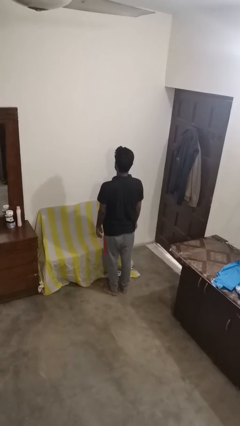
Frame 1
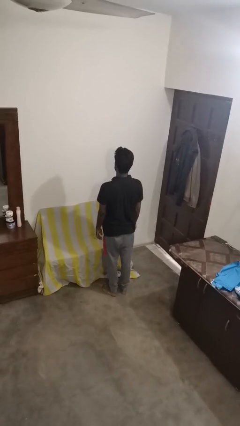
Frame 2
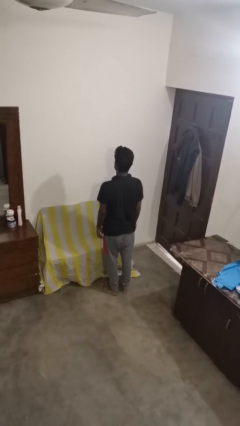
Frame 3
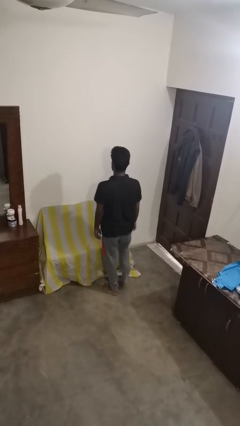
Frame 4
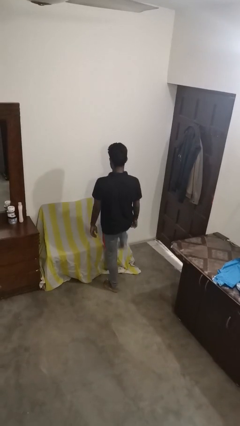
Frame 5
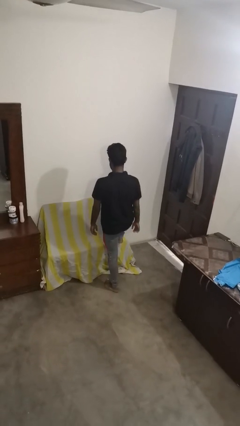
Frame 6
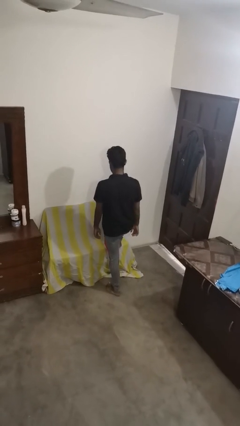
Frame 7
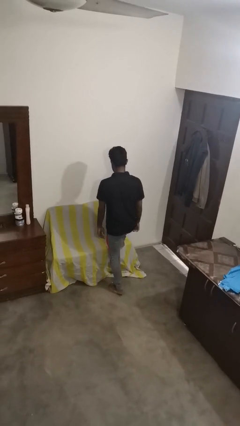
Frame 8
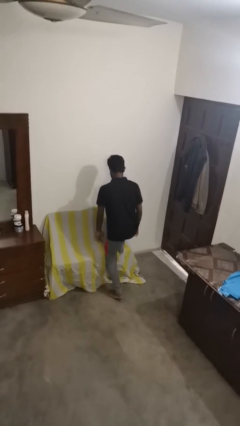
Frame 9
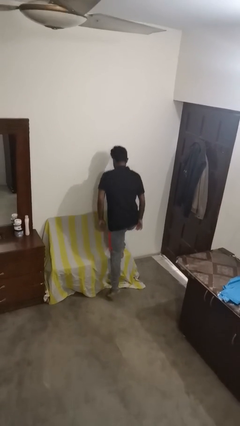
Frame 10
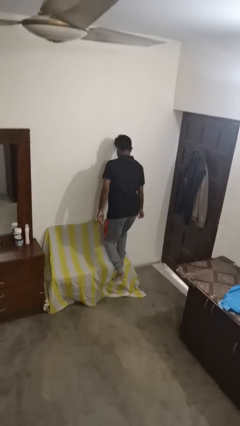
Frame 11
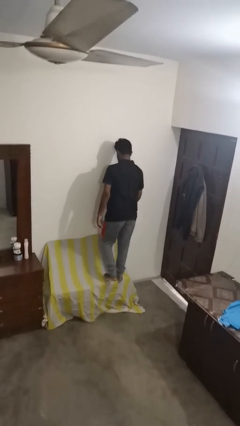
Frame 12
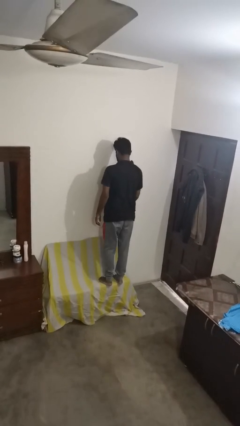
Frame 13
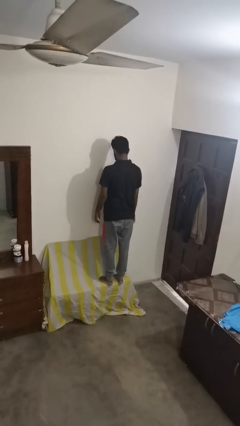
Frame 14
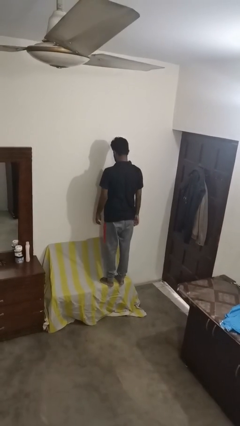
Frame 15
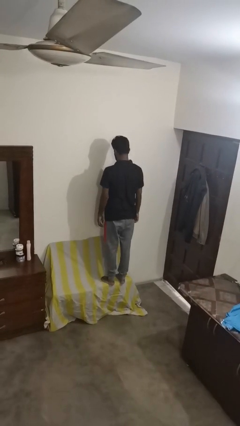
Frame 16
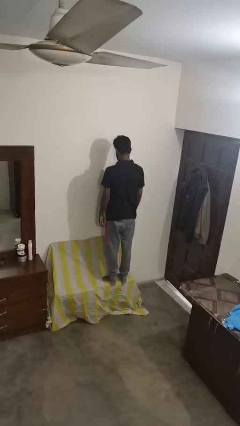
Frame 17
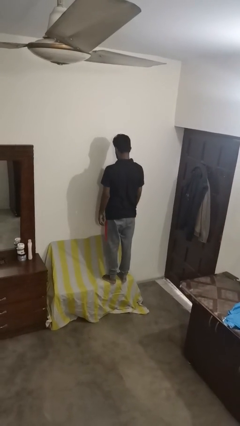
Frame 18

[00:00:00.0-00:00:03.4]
person climbs on couch

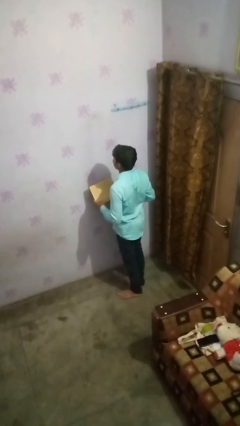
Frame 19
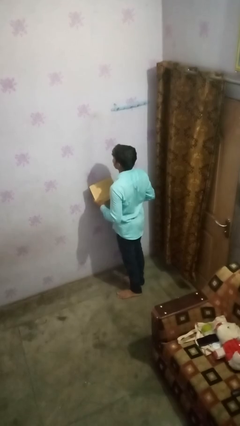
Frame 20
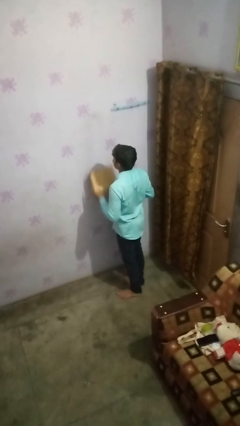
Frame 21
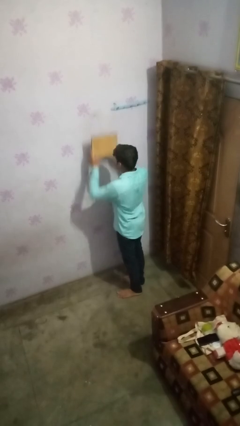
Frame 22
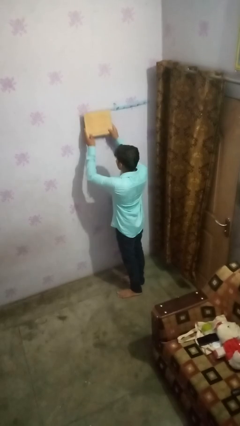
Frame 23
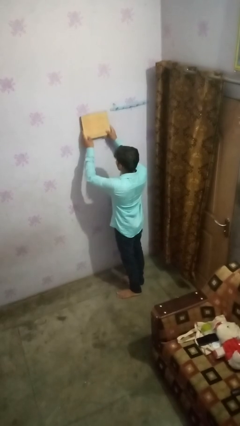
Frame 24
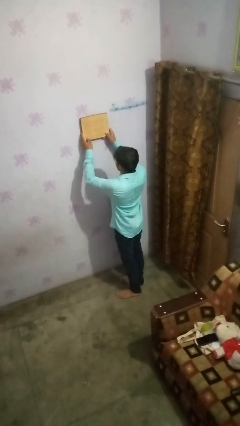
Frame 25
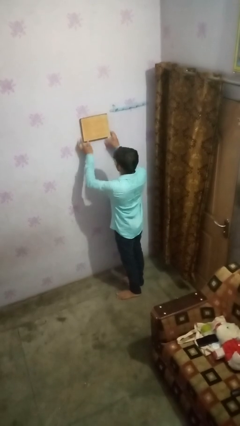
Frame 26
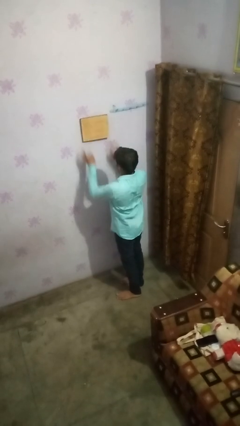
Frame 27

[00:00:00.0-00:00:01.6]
person puts up picture frame

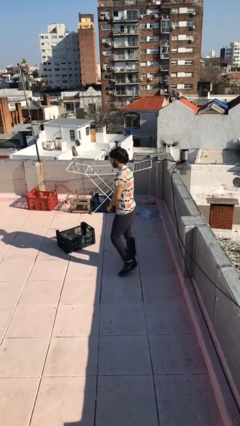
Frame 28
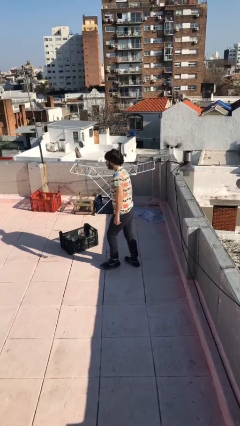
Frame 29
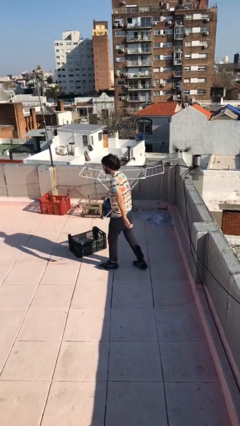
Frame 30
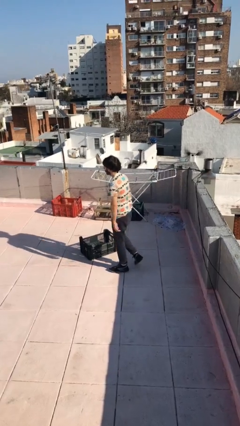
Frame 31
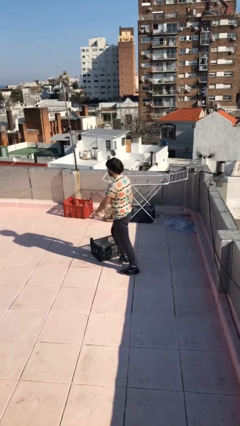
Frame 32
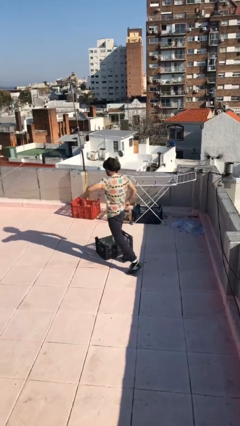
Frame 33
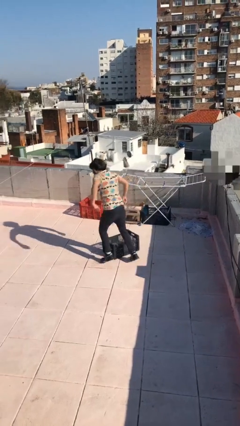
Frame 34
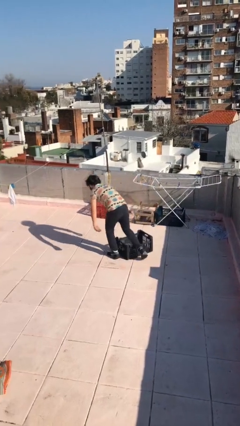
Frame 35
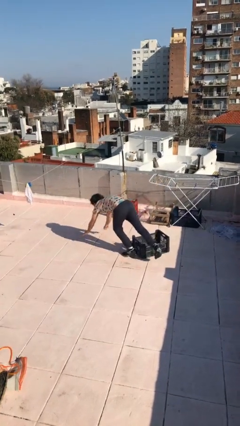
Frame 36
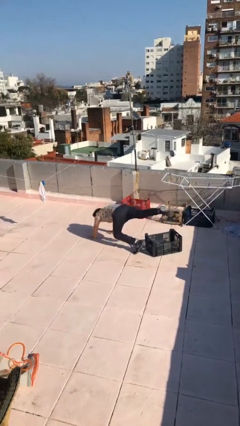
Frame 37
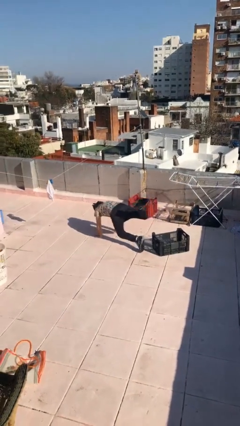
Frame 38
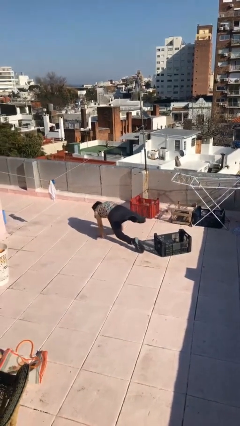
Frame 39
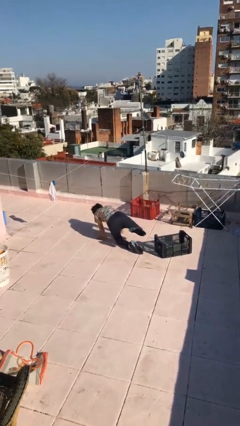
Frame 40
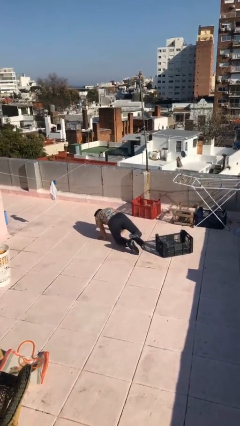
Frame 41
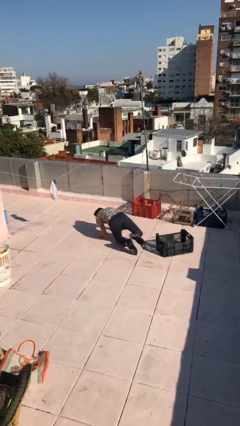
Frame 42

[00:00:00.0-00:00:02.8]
person trips on object on floor

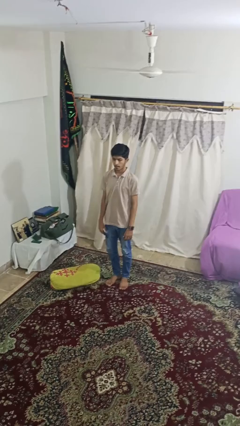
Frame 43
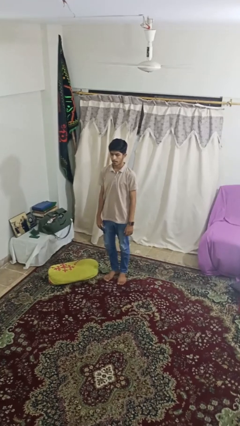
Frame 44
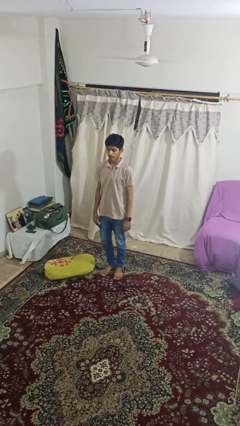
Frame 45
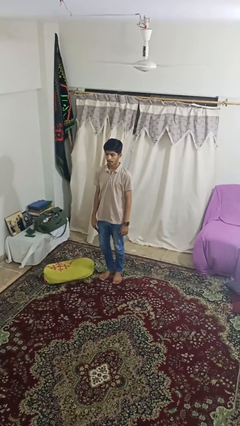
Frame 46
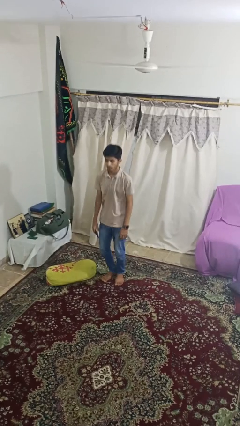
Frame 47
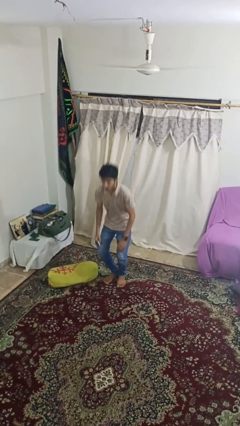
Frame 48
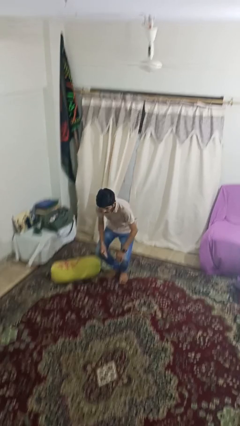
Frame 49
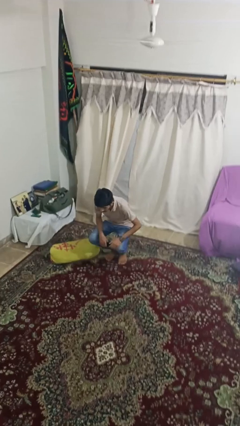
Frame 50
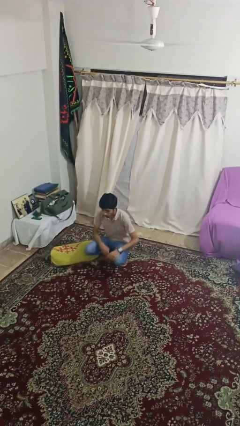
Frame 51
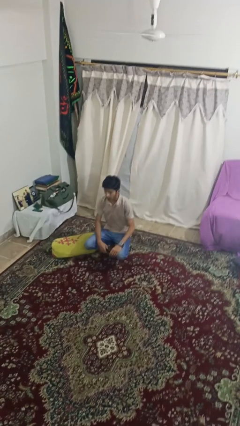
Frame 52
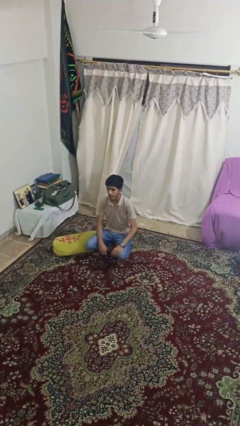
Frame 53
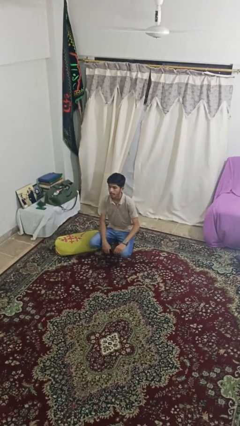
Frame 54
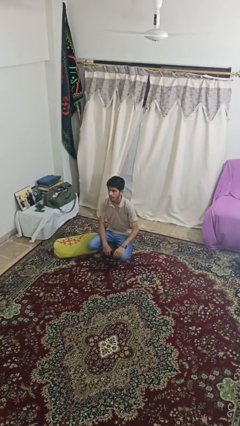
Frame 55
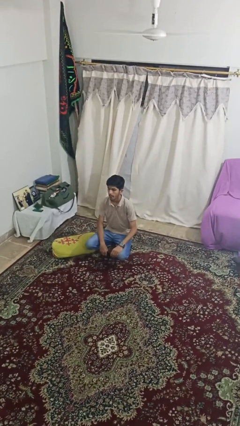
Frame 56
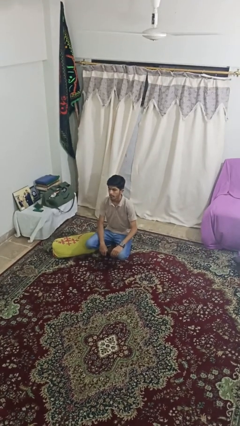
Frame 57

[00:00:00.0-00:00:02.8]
person squats

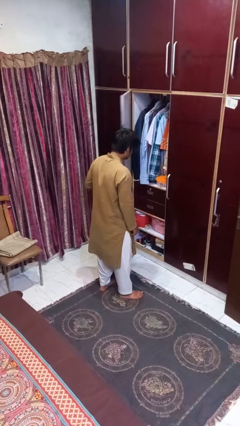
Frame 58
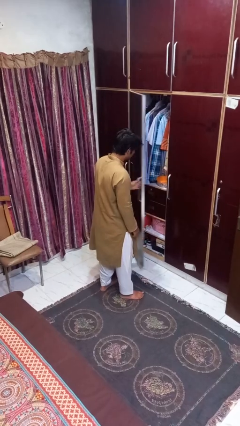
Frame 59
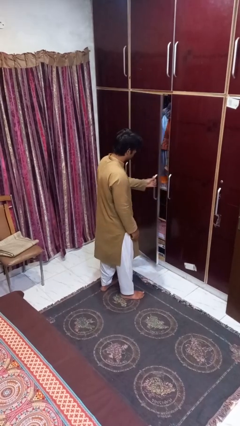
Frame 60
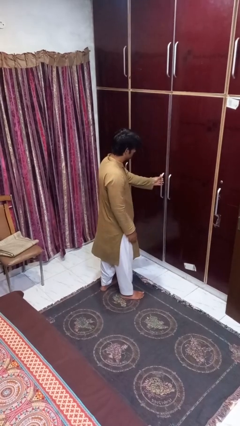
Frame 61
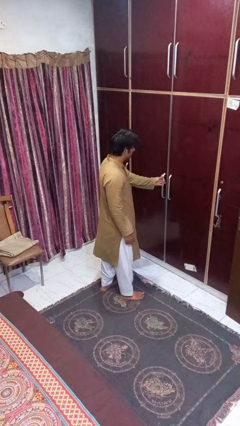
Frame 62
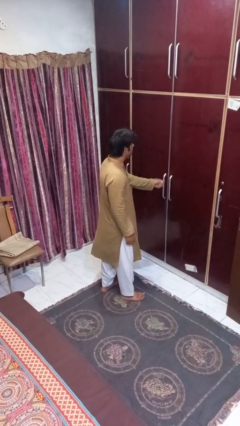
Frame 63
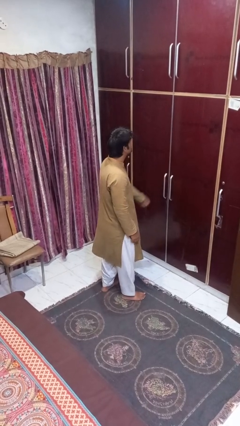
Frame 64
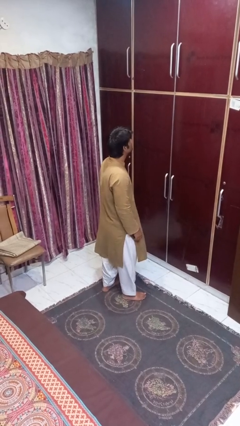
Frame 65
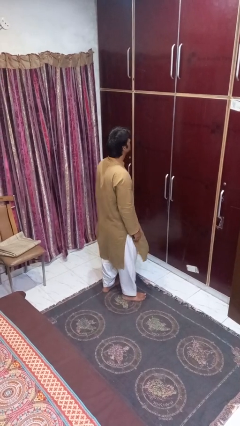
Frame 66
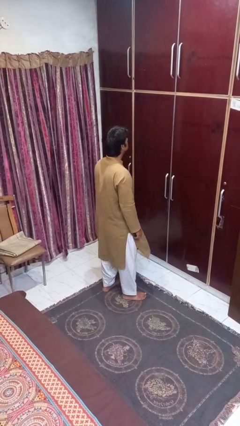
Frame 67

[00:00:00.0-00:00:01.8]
person closes closet door

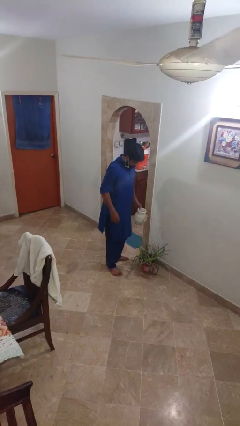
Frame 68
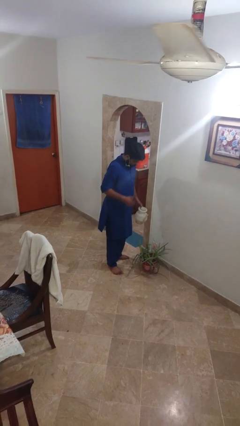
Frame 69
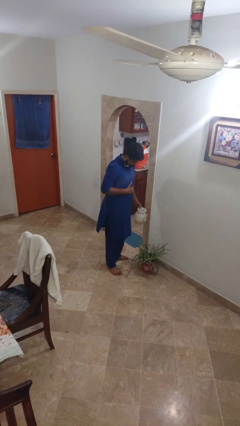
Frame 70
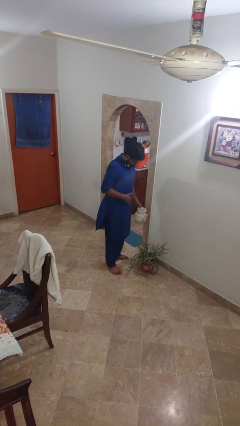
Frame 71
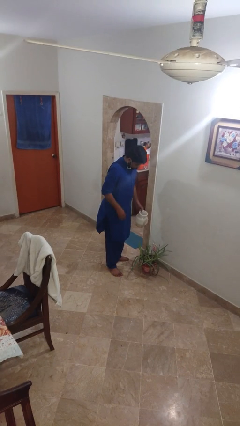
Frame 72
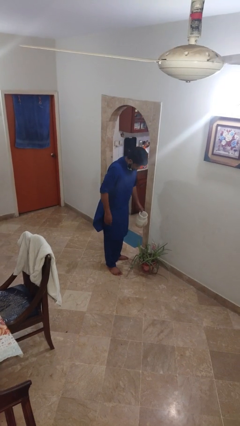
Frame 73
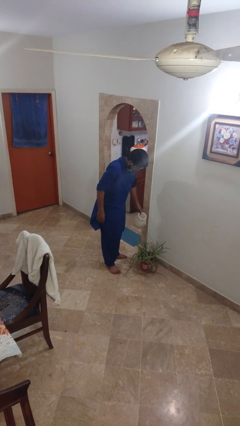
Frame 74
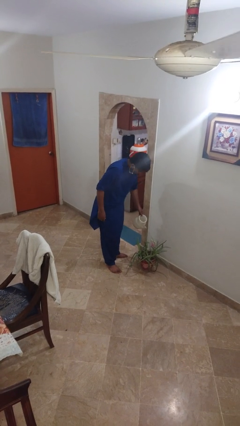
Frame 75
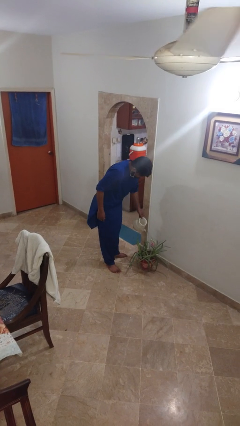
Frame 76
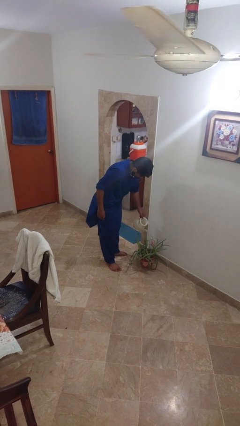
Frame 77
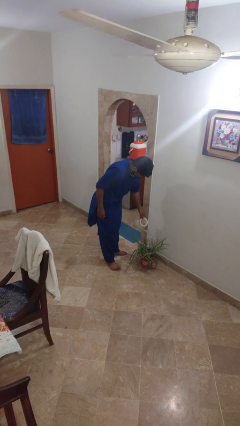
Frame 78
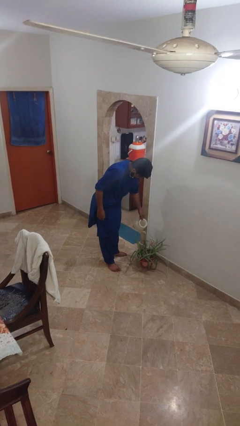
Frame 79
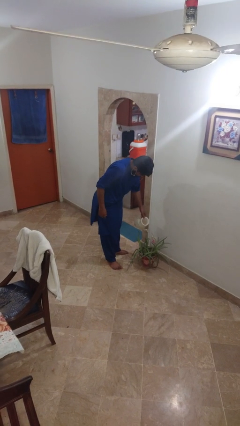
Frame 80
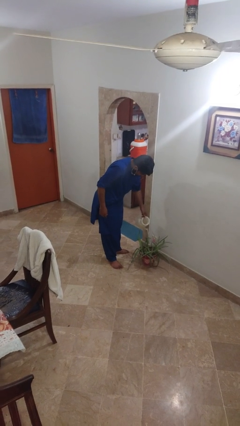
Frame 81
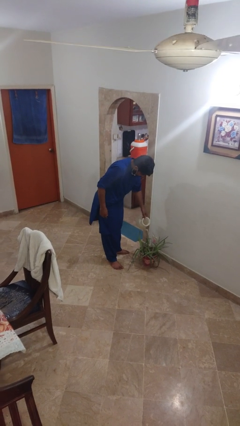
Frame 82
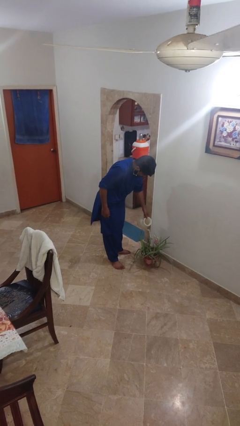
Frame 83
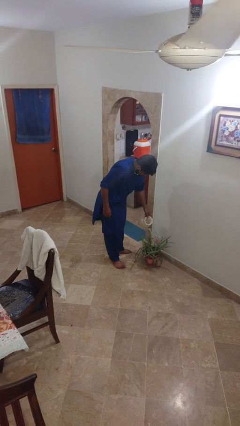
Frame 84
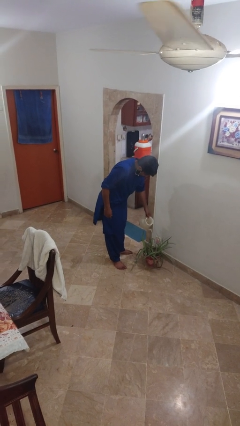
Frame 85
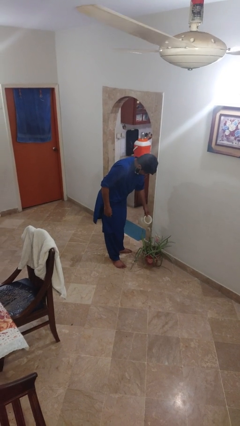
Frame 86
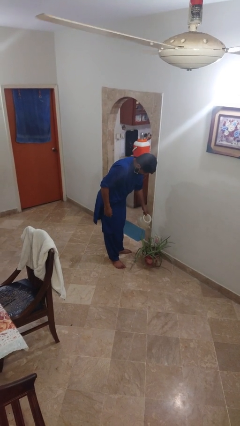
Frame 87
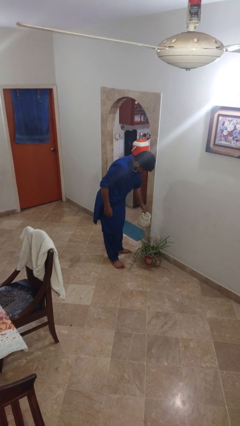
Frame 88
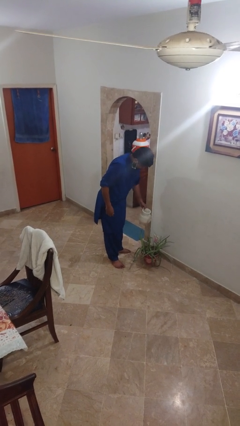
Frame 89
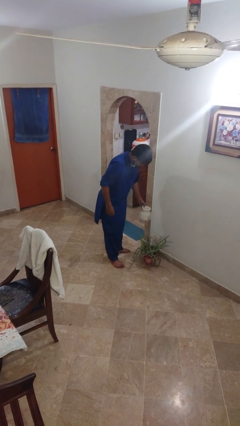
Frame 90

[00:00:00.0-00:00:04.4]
person waters houseplant

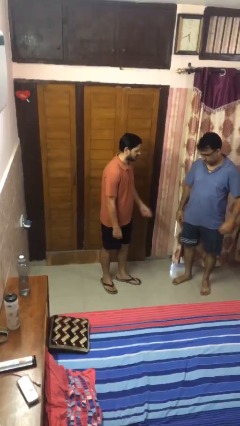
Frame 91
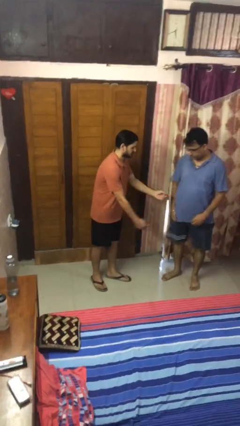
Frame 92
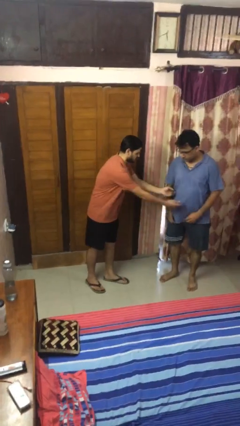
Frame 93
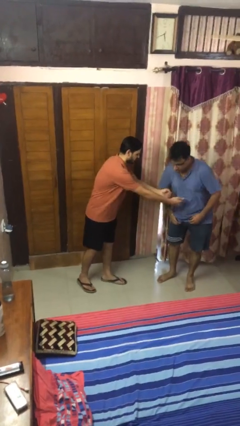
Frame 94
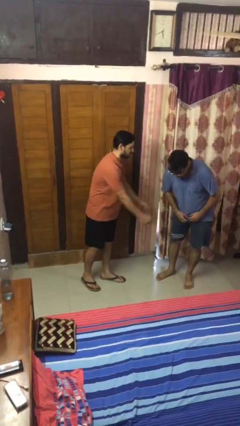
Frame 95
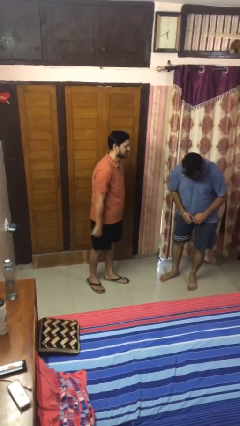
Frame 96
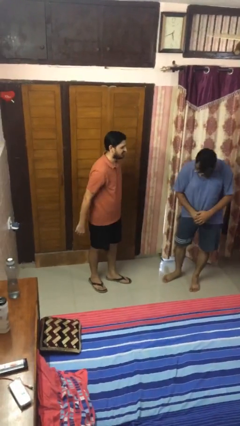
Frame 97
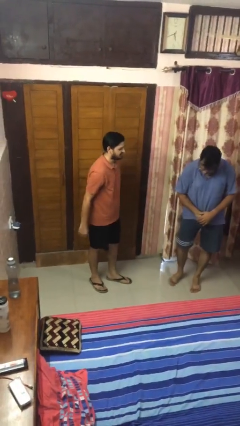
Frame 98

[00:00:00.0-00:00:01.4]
person tickles person
